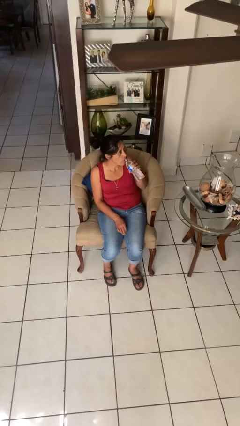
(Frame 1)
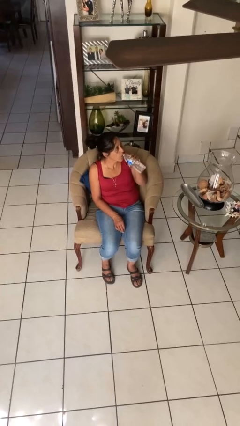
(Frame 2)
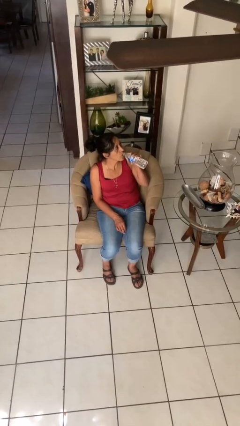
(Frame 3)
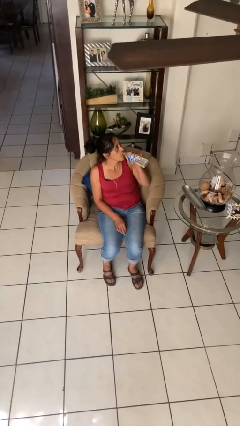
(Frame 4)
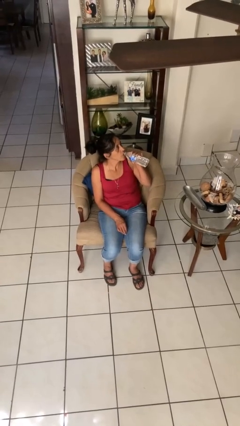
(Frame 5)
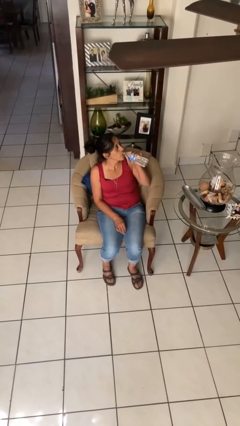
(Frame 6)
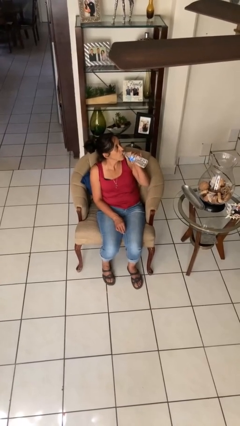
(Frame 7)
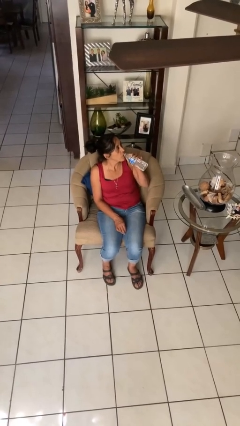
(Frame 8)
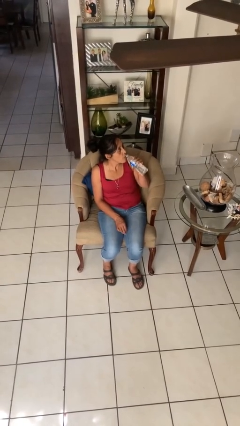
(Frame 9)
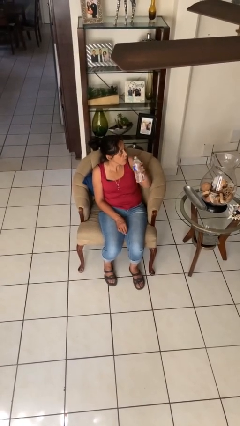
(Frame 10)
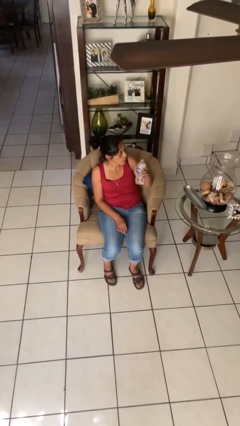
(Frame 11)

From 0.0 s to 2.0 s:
person drinks from bottle

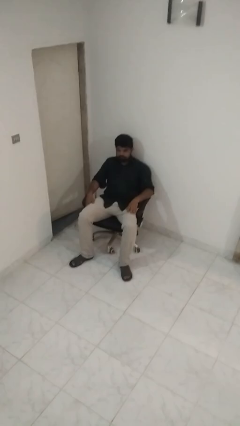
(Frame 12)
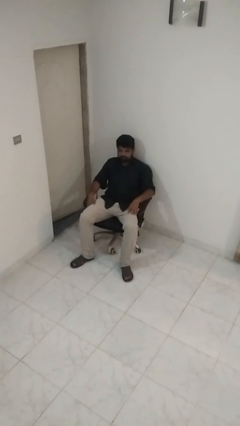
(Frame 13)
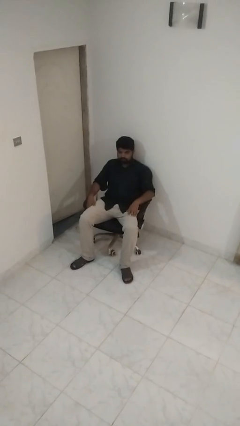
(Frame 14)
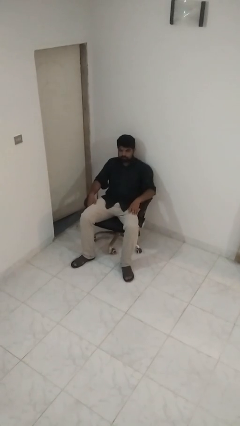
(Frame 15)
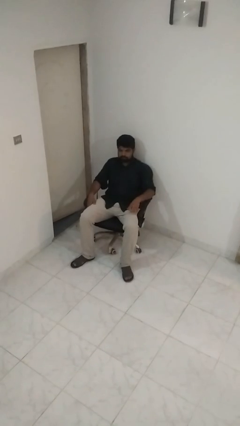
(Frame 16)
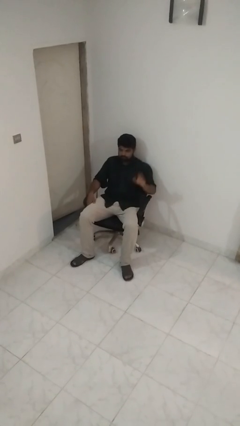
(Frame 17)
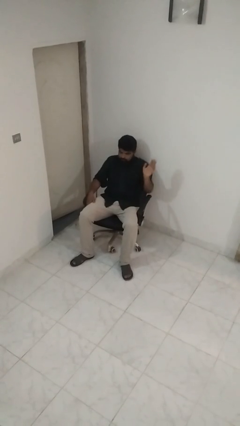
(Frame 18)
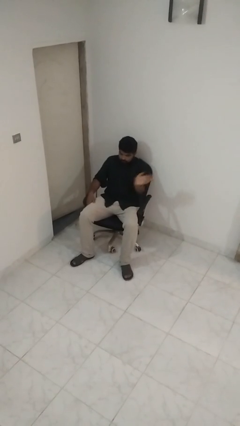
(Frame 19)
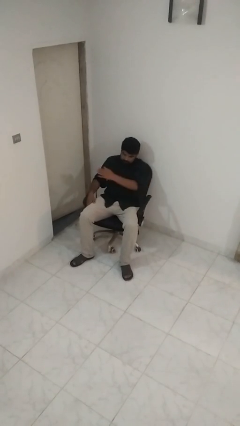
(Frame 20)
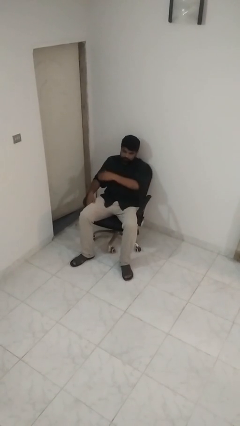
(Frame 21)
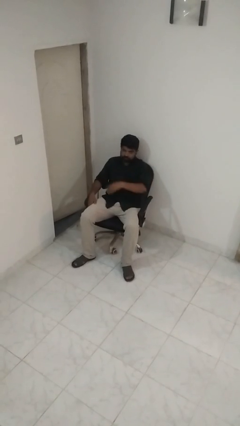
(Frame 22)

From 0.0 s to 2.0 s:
person gestures swipe right

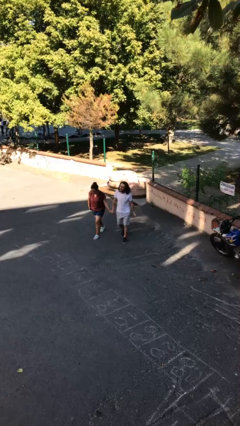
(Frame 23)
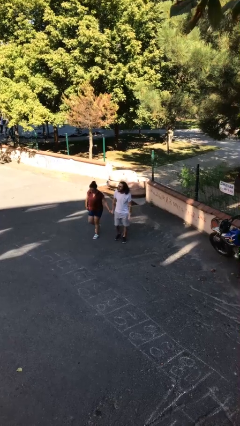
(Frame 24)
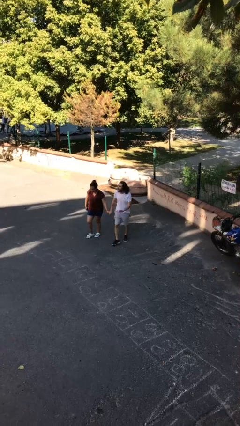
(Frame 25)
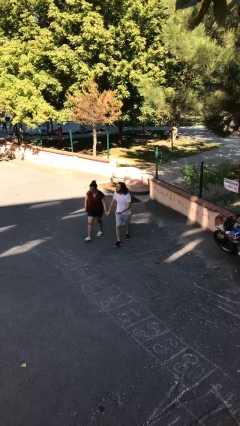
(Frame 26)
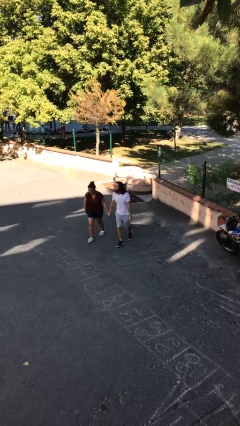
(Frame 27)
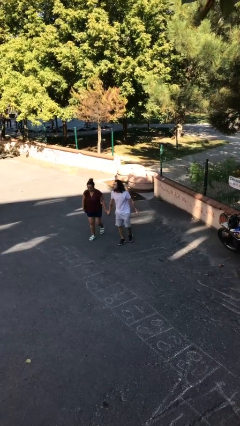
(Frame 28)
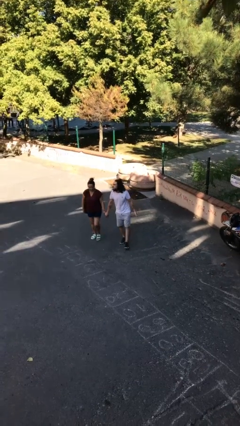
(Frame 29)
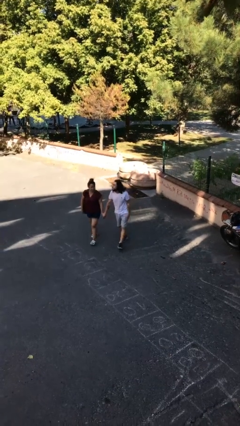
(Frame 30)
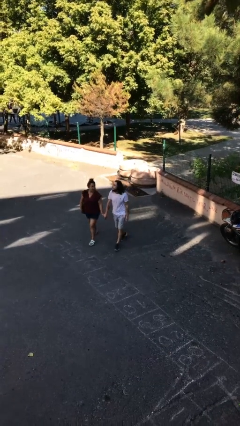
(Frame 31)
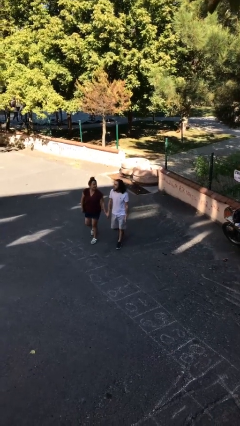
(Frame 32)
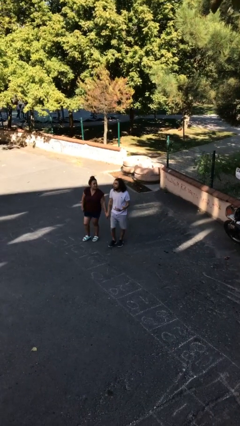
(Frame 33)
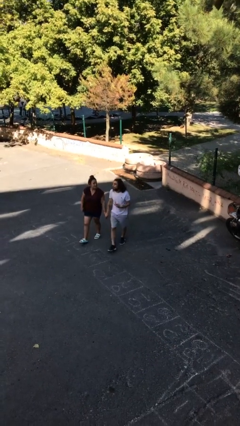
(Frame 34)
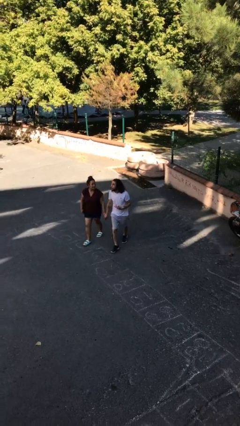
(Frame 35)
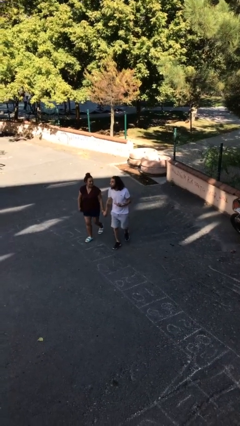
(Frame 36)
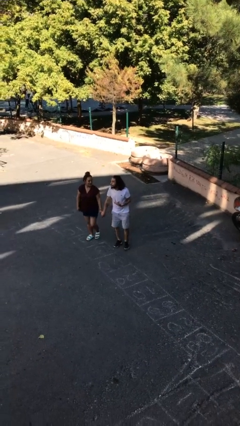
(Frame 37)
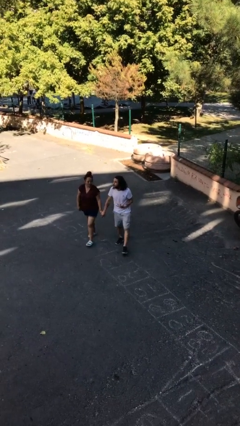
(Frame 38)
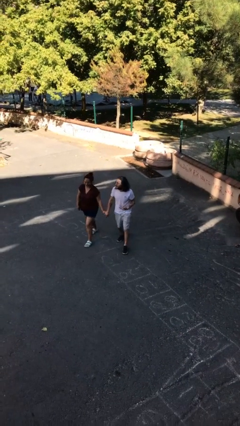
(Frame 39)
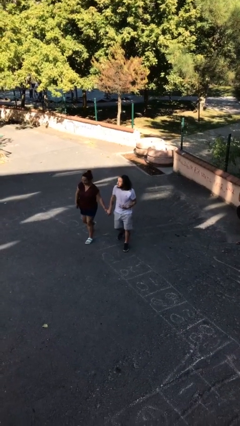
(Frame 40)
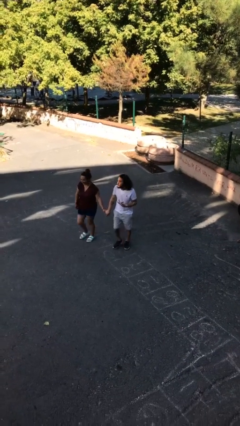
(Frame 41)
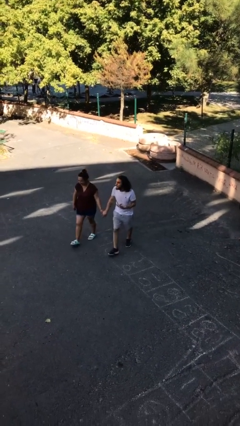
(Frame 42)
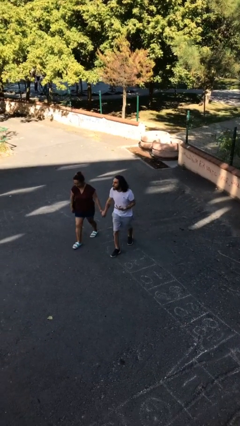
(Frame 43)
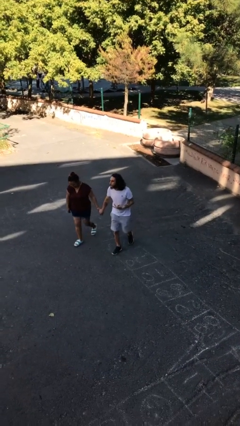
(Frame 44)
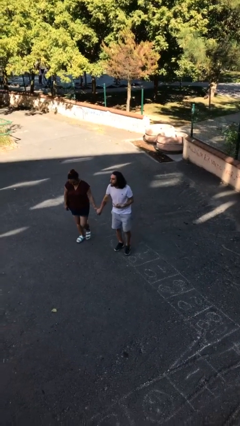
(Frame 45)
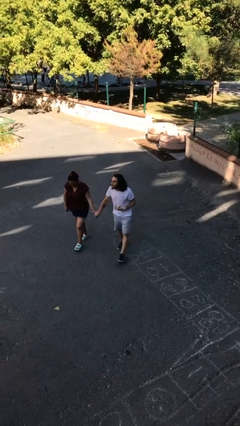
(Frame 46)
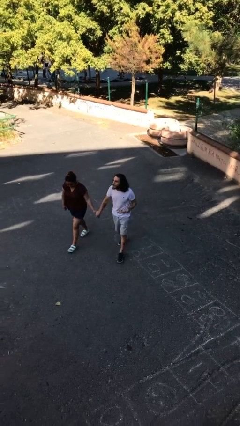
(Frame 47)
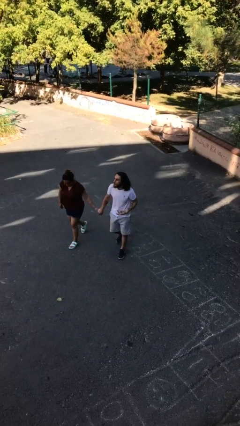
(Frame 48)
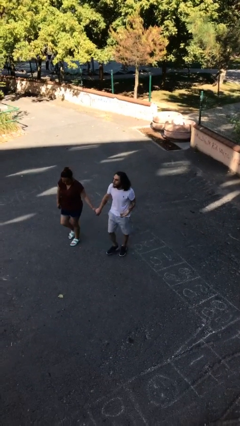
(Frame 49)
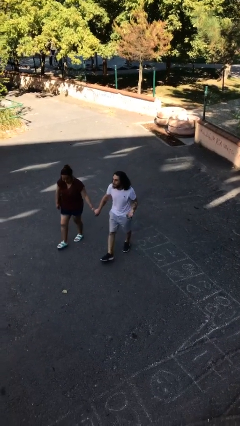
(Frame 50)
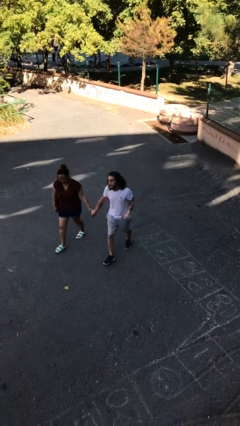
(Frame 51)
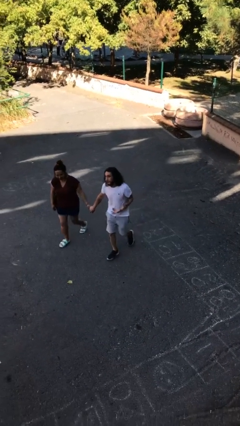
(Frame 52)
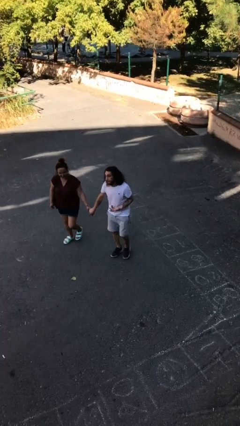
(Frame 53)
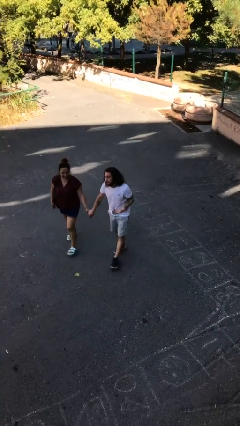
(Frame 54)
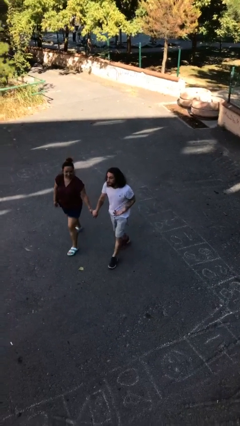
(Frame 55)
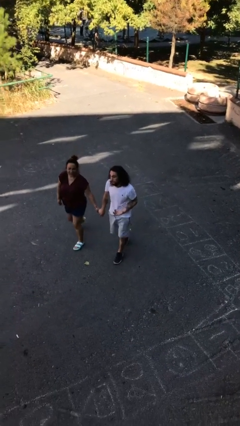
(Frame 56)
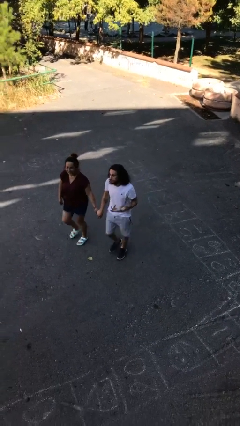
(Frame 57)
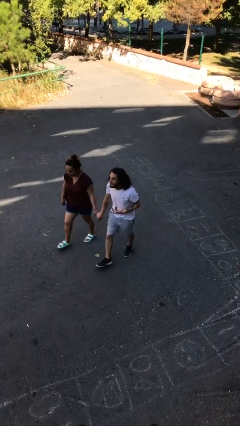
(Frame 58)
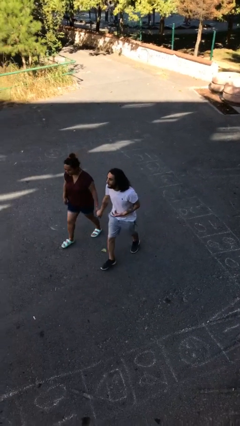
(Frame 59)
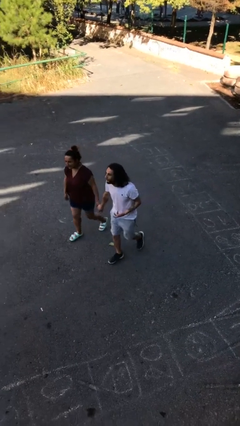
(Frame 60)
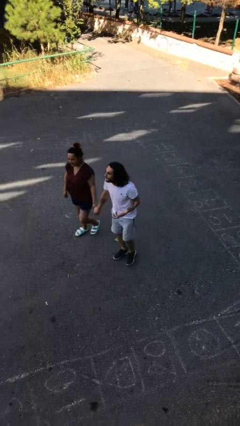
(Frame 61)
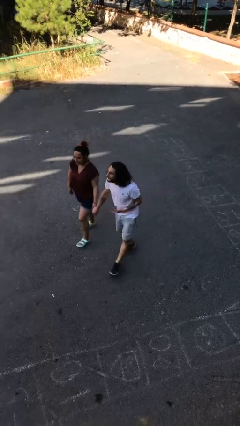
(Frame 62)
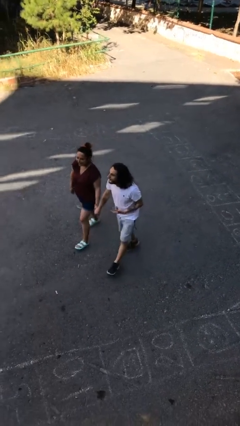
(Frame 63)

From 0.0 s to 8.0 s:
person holds hand

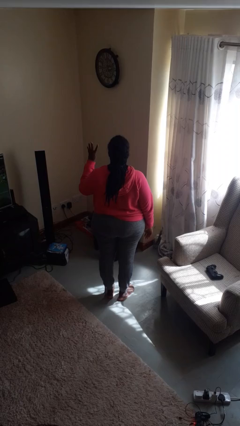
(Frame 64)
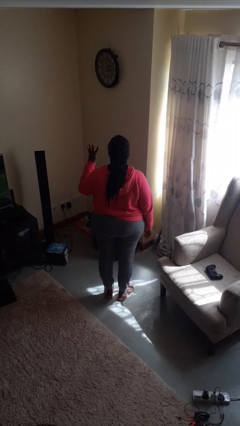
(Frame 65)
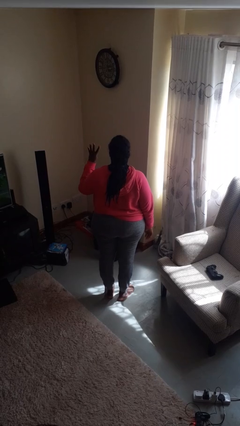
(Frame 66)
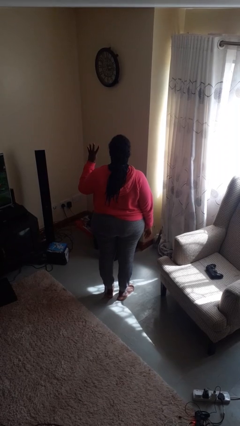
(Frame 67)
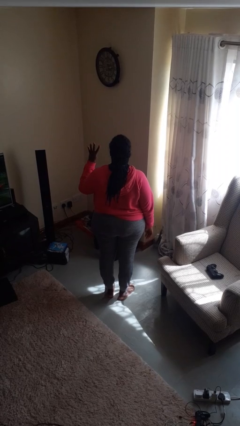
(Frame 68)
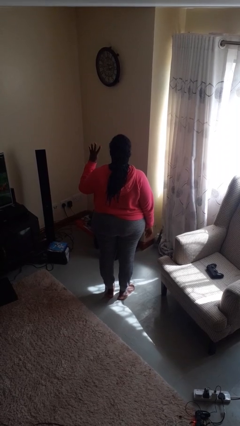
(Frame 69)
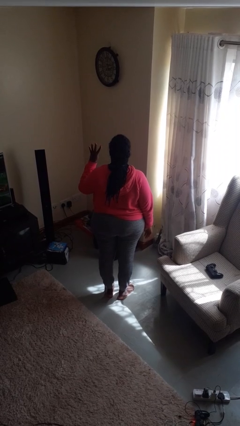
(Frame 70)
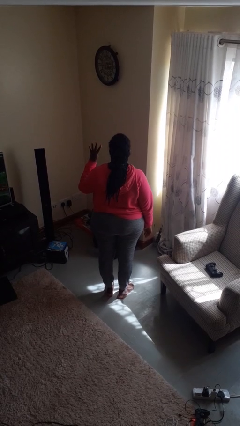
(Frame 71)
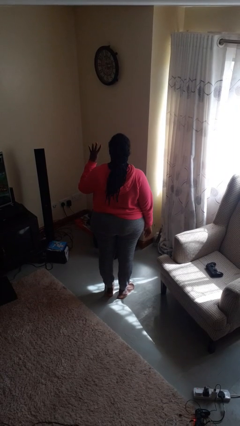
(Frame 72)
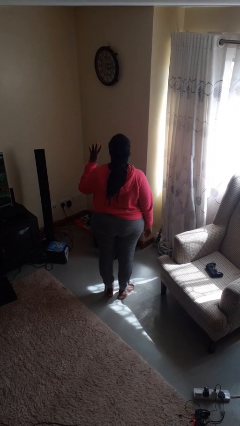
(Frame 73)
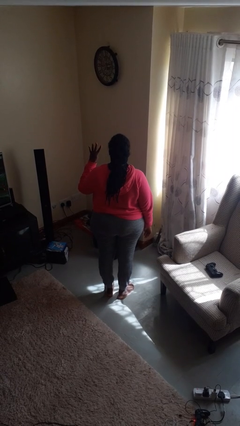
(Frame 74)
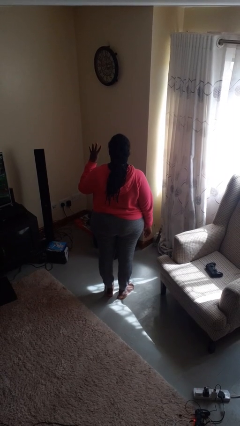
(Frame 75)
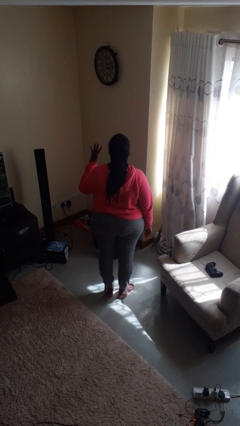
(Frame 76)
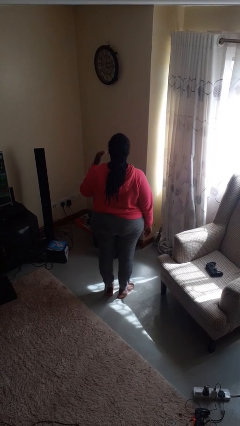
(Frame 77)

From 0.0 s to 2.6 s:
person gestures number four

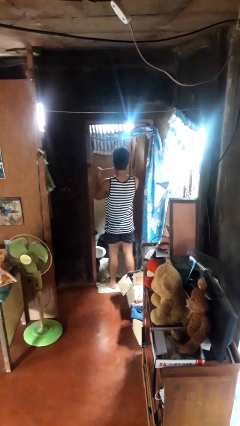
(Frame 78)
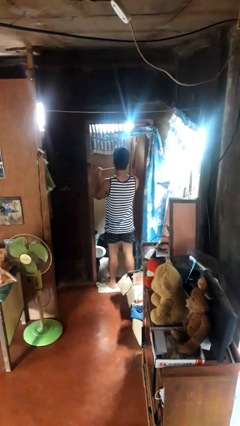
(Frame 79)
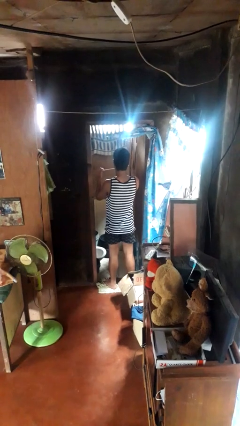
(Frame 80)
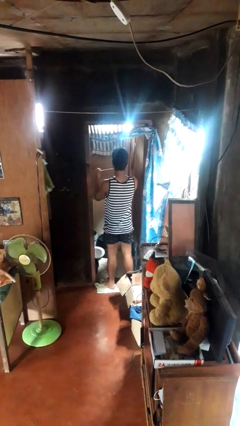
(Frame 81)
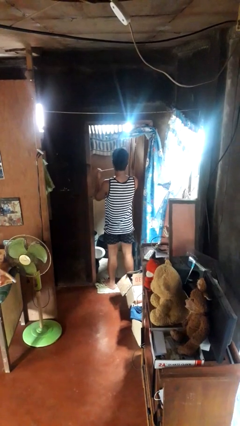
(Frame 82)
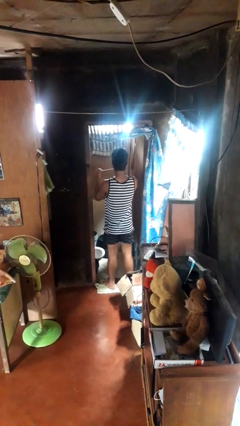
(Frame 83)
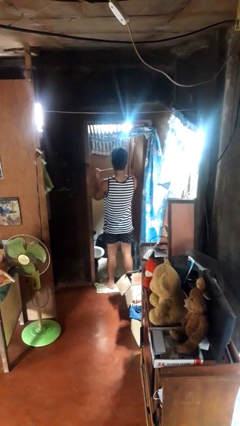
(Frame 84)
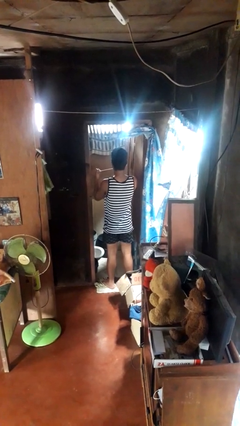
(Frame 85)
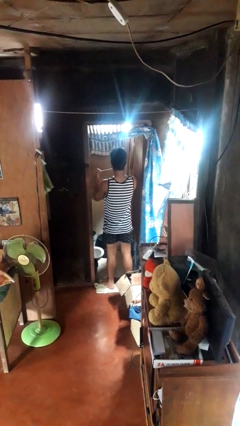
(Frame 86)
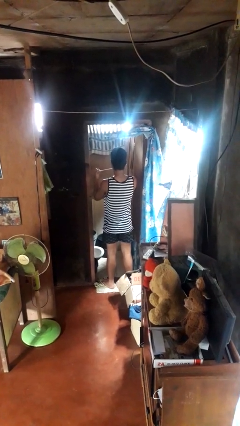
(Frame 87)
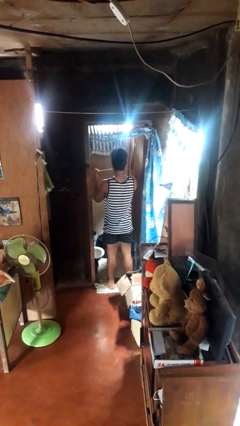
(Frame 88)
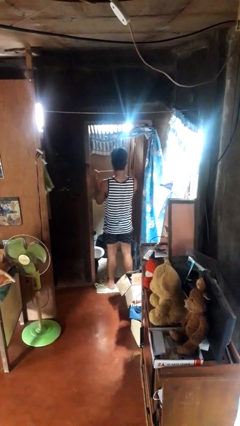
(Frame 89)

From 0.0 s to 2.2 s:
person flosses
